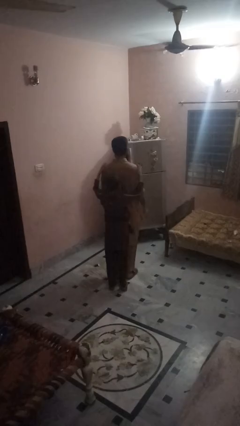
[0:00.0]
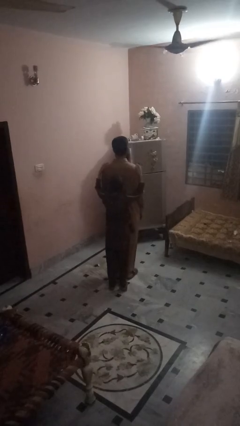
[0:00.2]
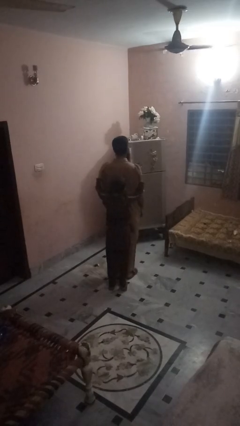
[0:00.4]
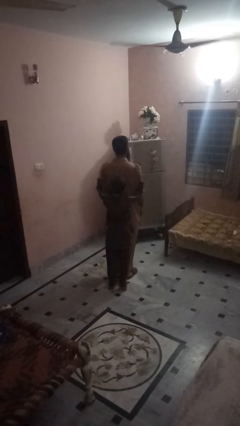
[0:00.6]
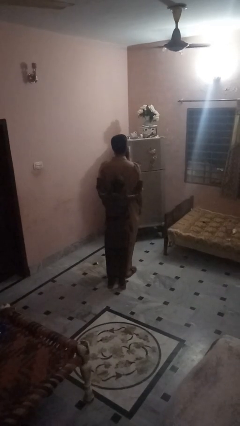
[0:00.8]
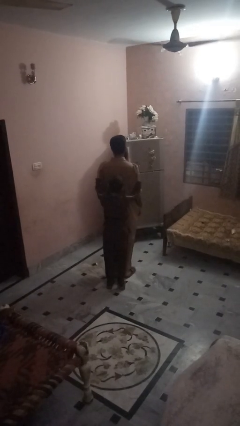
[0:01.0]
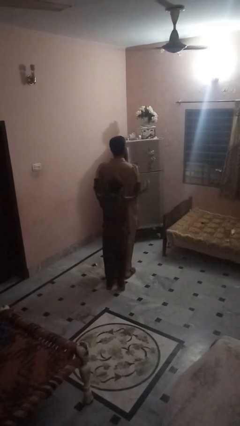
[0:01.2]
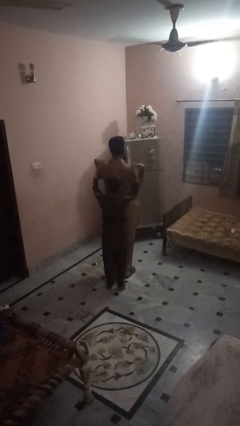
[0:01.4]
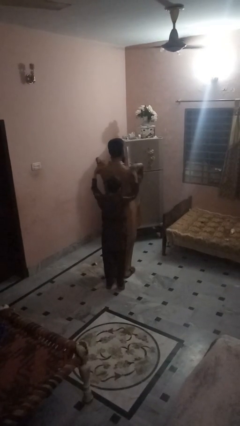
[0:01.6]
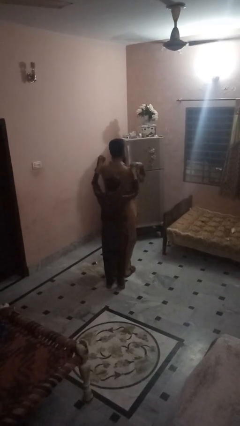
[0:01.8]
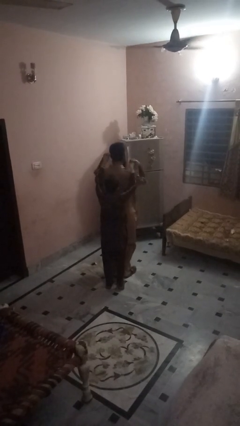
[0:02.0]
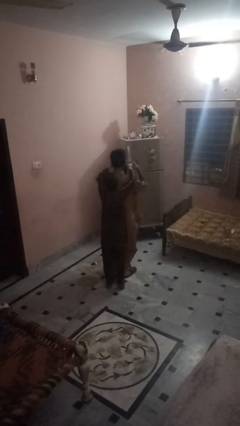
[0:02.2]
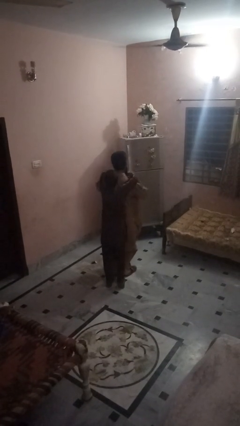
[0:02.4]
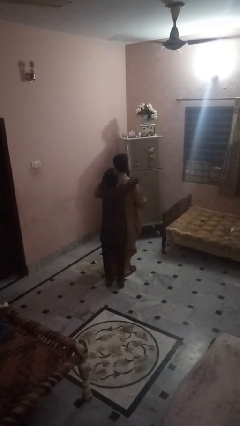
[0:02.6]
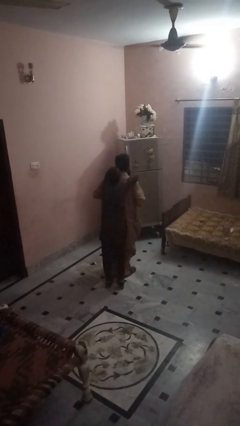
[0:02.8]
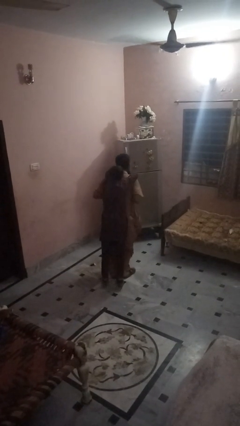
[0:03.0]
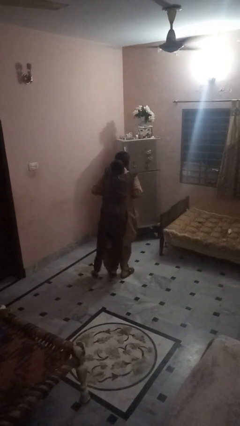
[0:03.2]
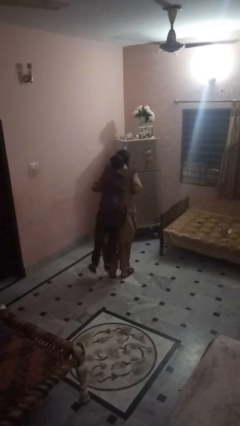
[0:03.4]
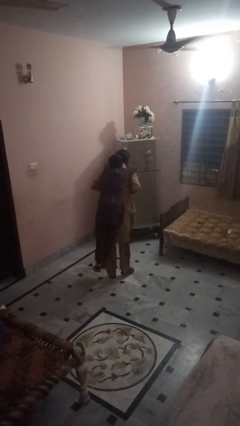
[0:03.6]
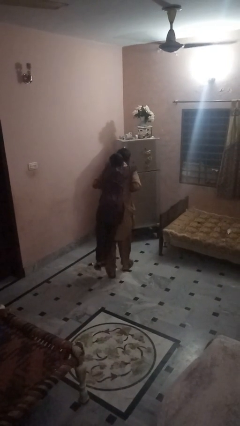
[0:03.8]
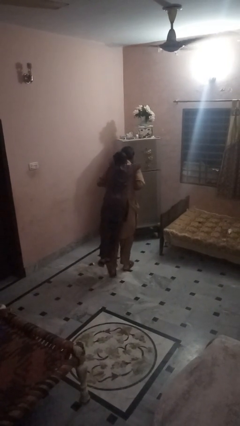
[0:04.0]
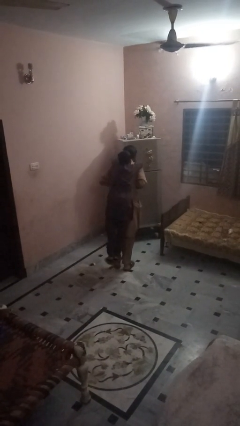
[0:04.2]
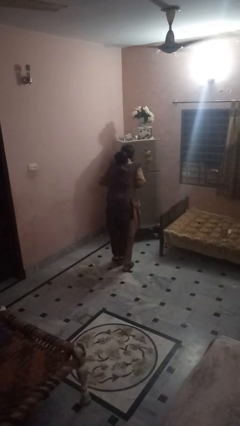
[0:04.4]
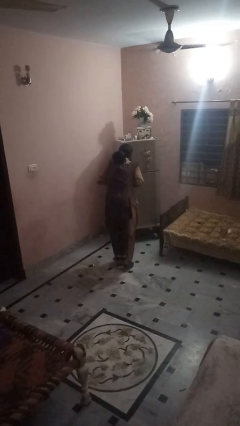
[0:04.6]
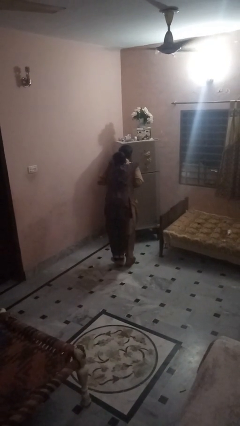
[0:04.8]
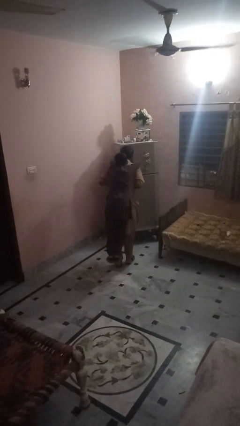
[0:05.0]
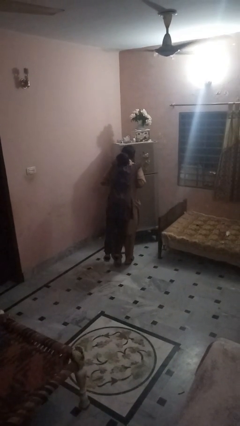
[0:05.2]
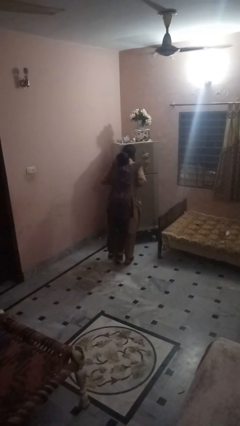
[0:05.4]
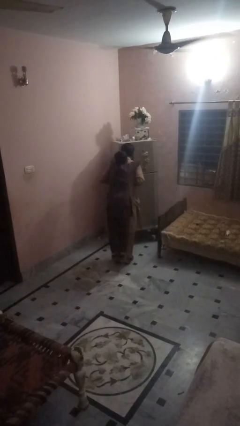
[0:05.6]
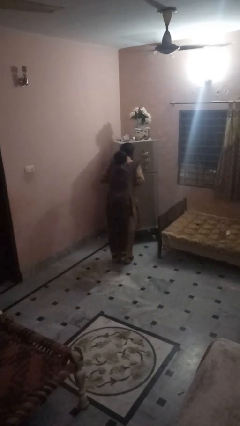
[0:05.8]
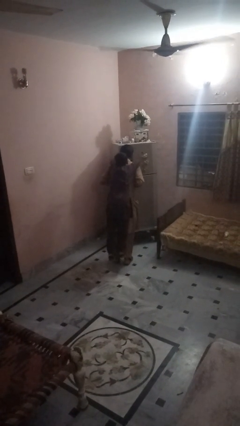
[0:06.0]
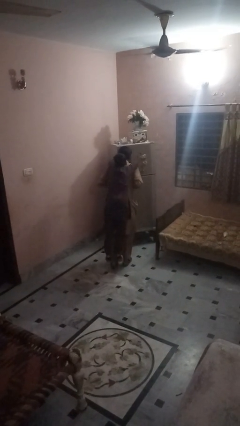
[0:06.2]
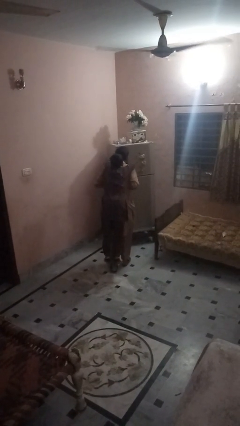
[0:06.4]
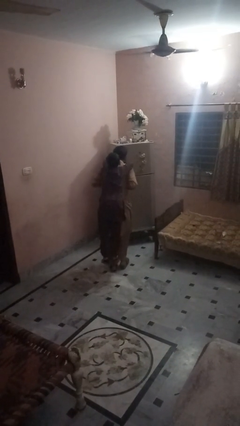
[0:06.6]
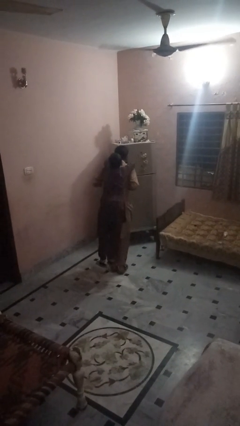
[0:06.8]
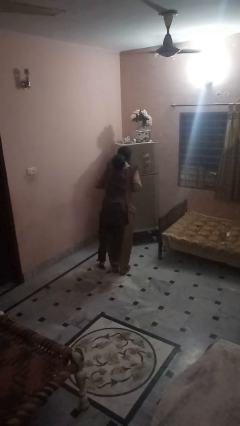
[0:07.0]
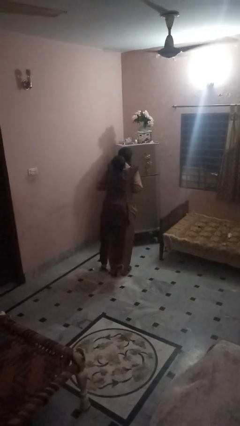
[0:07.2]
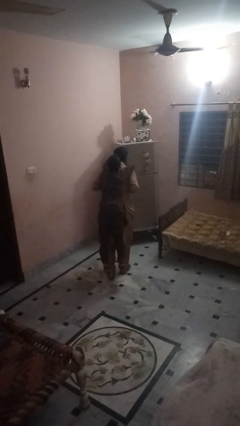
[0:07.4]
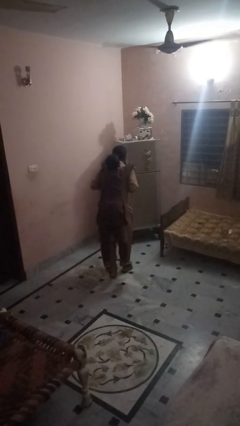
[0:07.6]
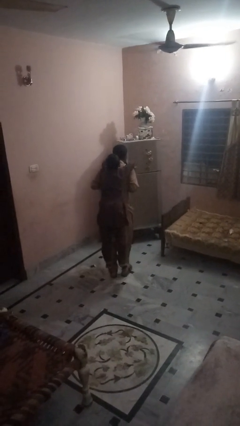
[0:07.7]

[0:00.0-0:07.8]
person carries person on back

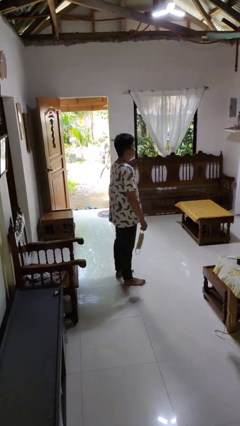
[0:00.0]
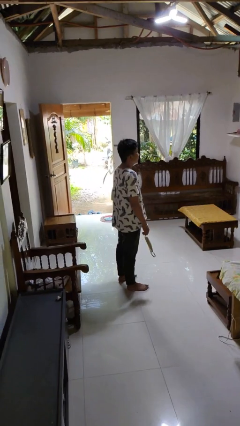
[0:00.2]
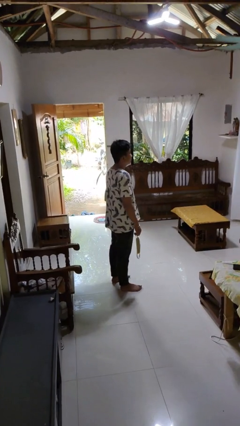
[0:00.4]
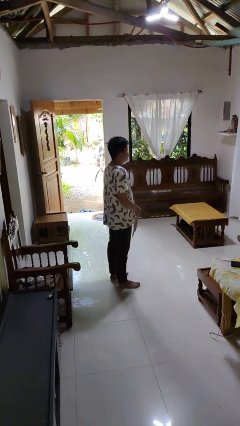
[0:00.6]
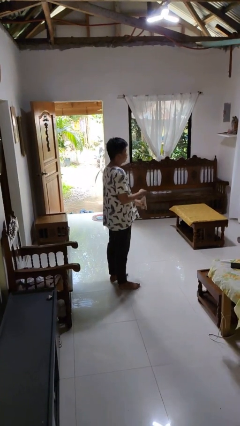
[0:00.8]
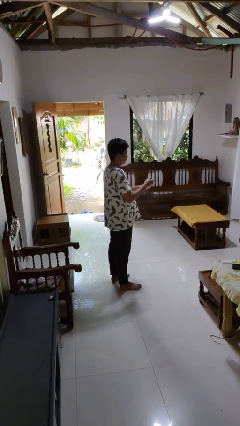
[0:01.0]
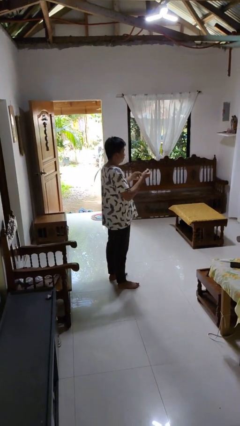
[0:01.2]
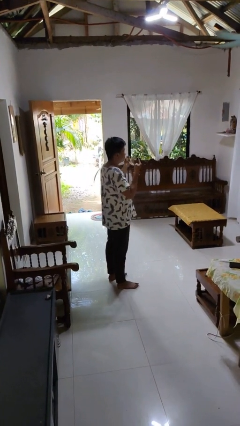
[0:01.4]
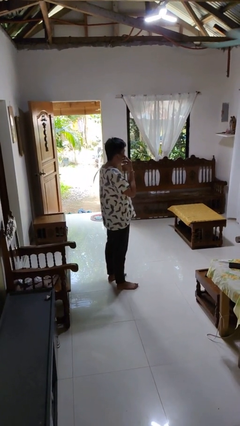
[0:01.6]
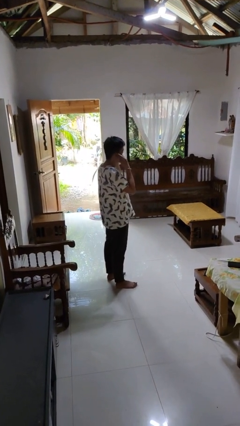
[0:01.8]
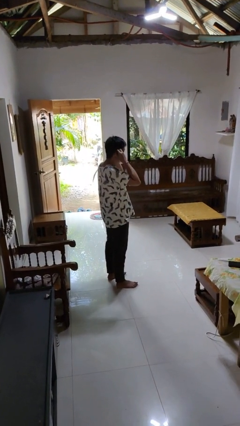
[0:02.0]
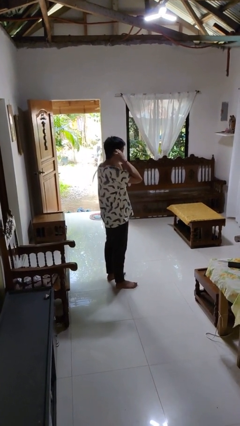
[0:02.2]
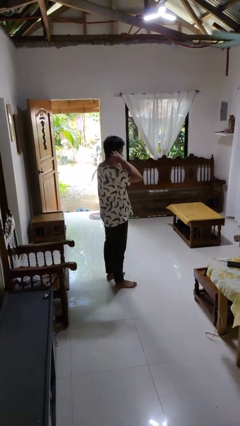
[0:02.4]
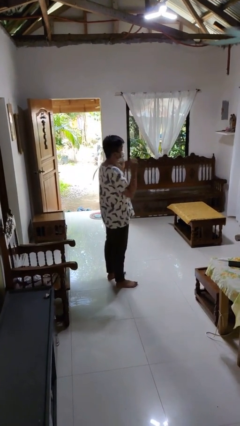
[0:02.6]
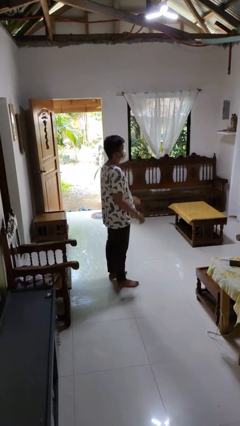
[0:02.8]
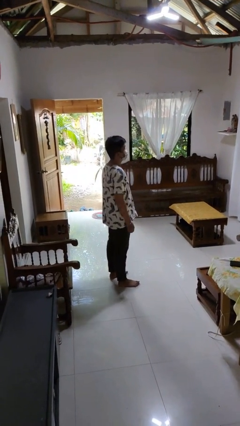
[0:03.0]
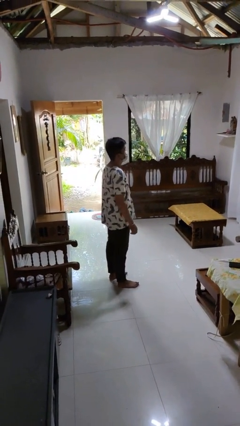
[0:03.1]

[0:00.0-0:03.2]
person puts on facemask

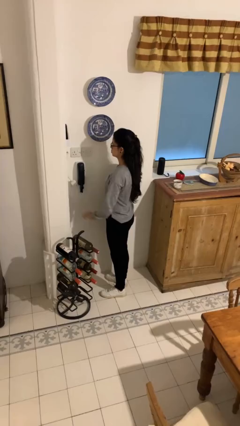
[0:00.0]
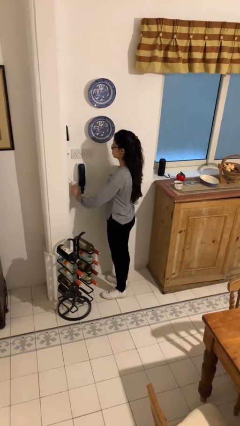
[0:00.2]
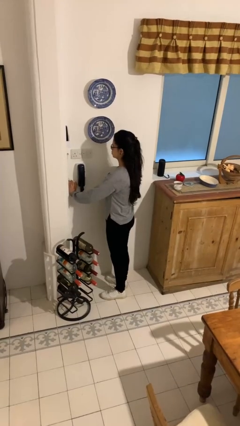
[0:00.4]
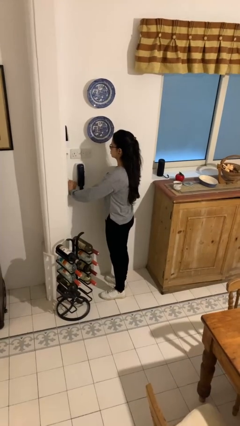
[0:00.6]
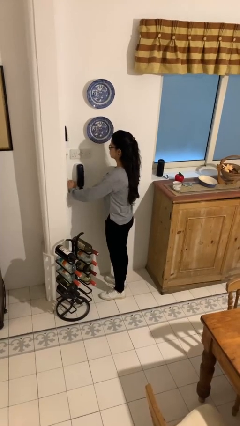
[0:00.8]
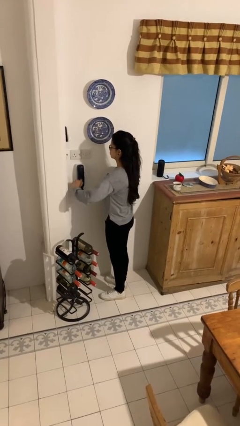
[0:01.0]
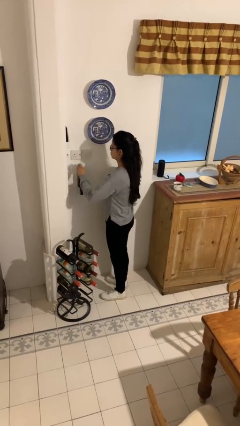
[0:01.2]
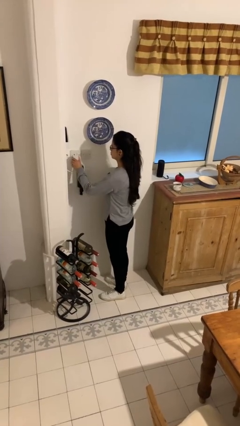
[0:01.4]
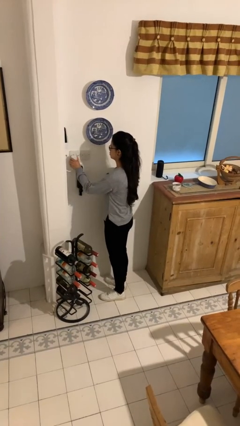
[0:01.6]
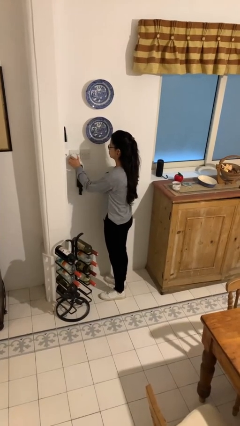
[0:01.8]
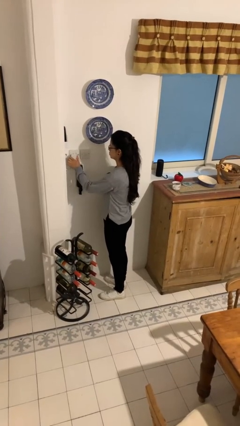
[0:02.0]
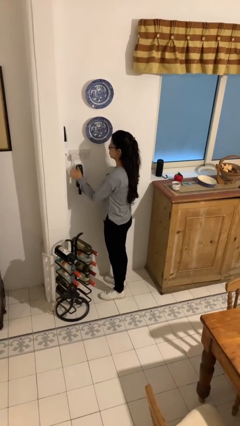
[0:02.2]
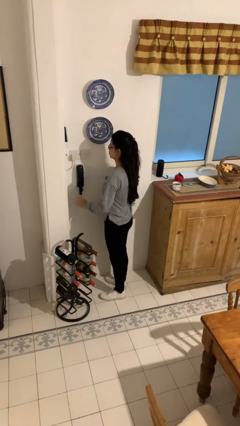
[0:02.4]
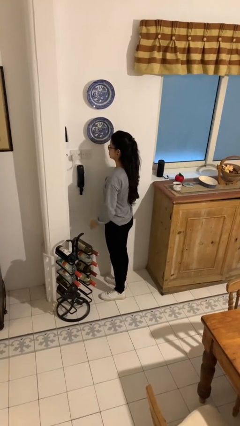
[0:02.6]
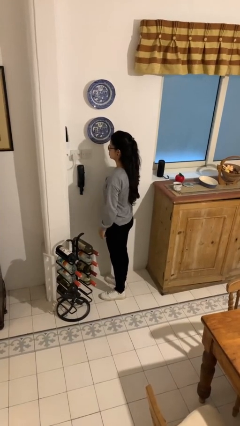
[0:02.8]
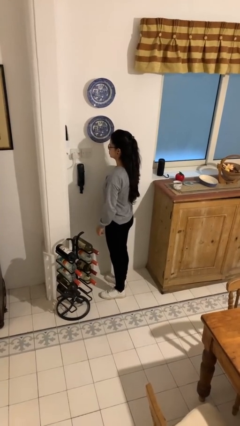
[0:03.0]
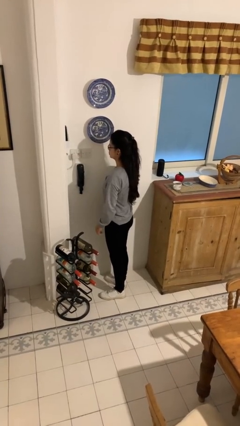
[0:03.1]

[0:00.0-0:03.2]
person plugs into electrical socket

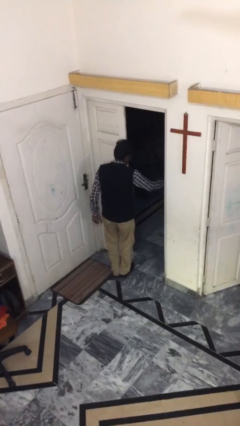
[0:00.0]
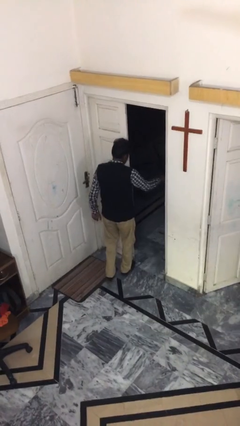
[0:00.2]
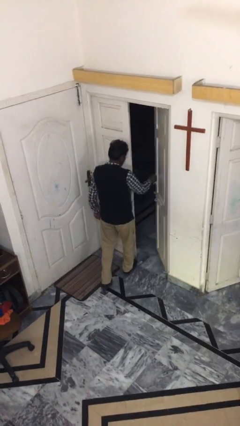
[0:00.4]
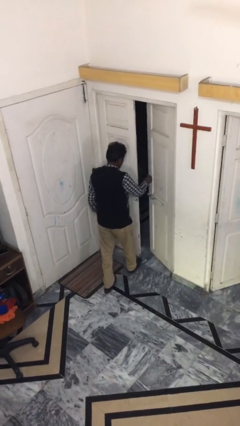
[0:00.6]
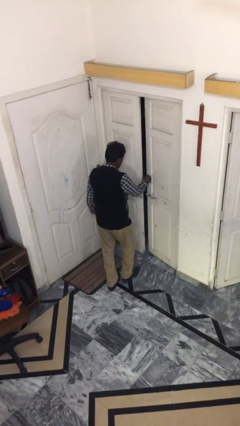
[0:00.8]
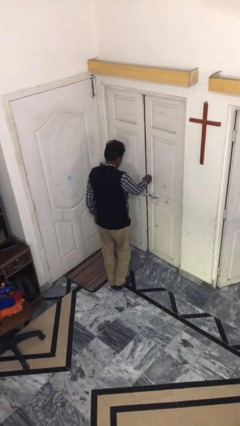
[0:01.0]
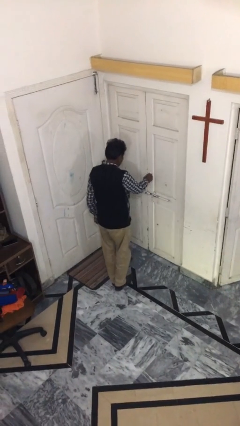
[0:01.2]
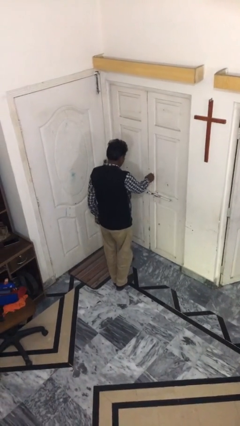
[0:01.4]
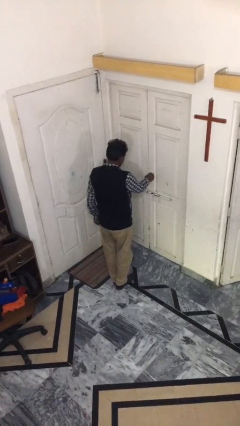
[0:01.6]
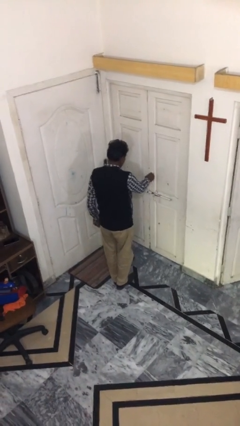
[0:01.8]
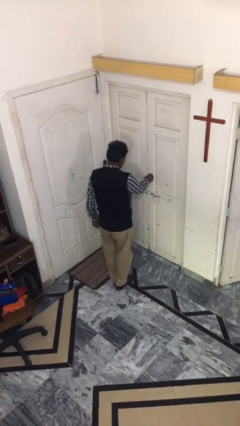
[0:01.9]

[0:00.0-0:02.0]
person closes facility door

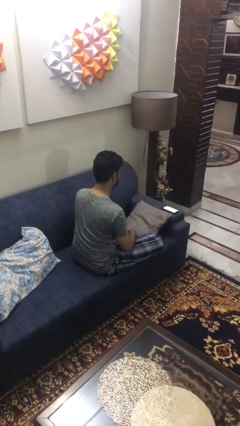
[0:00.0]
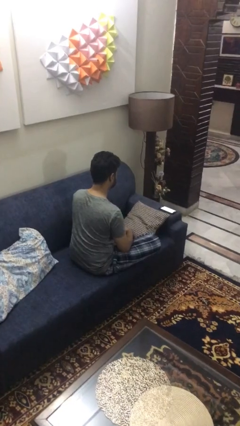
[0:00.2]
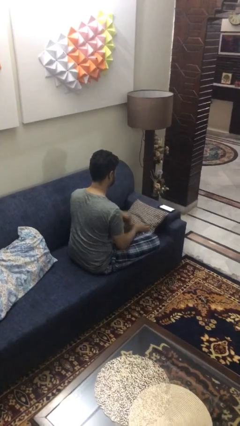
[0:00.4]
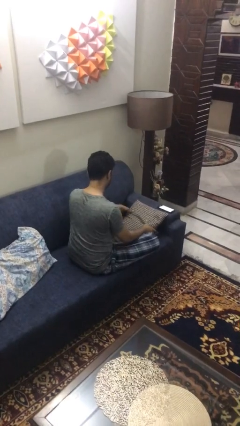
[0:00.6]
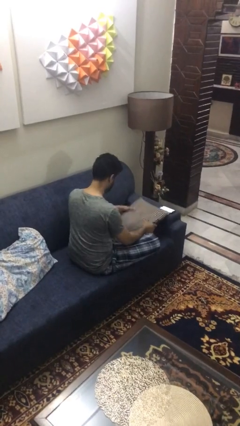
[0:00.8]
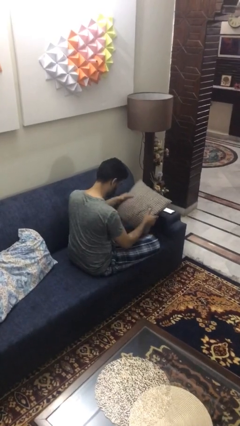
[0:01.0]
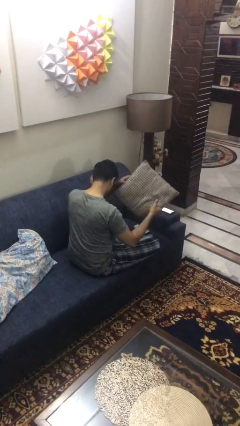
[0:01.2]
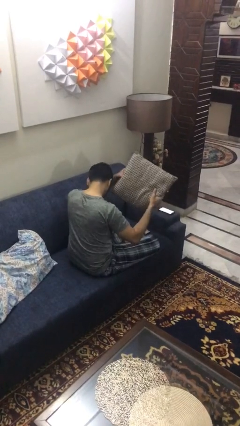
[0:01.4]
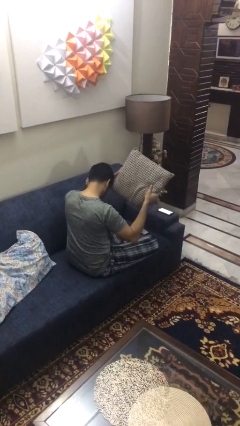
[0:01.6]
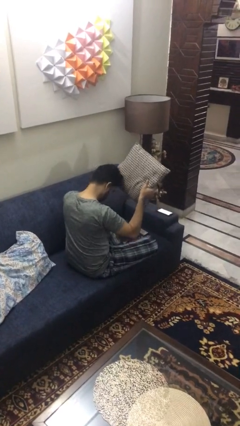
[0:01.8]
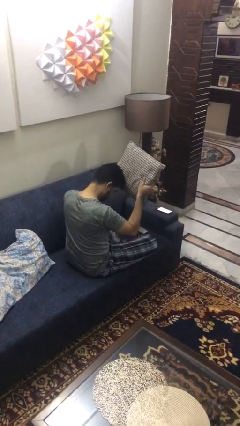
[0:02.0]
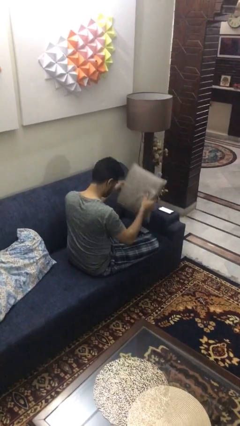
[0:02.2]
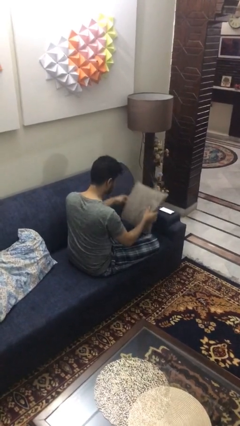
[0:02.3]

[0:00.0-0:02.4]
person searches in couch
